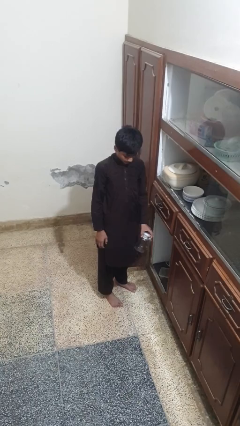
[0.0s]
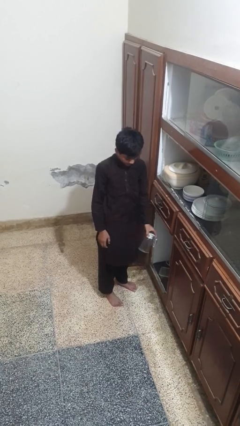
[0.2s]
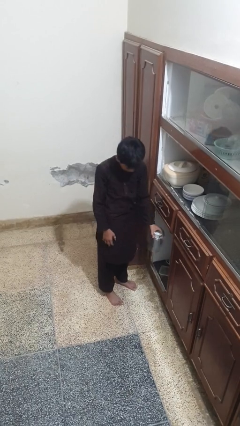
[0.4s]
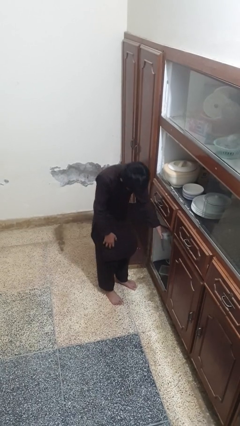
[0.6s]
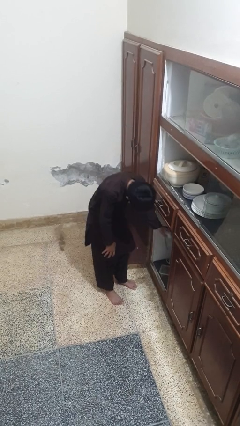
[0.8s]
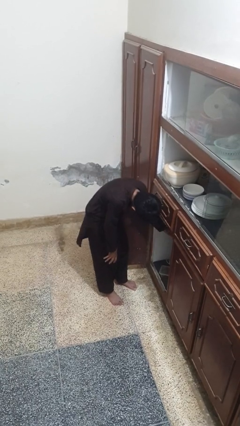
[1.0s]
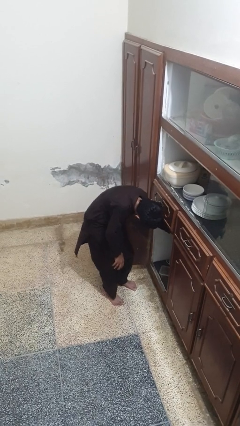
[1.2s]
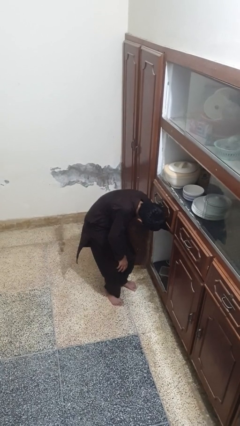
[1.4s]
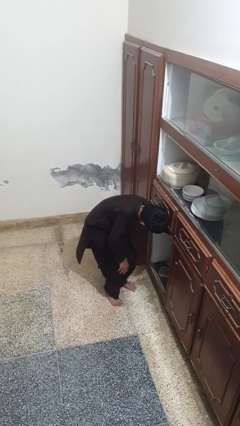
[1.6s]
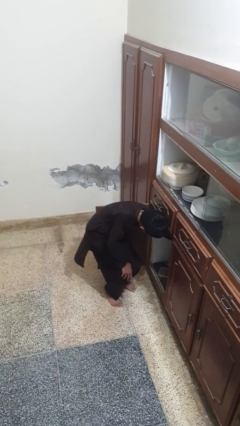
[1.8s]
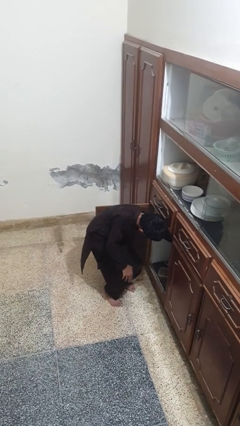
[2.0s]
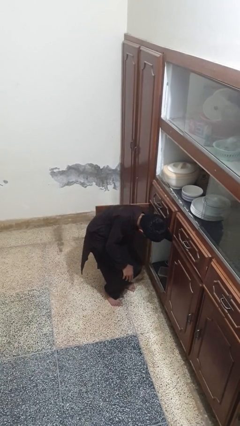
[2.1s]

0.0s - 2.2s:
person puts object in cabinet

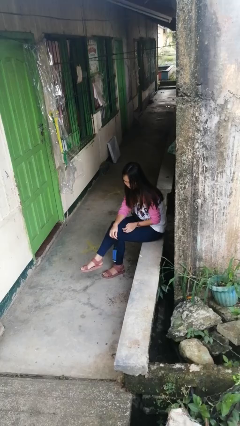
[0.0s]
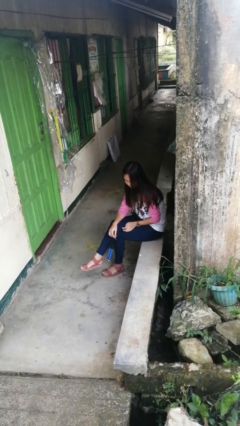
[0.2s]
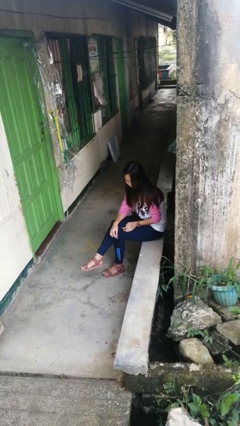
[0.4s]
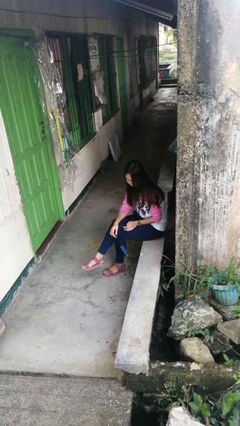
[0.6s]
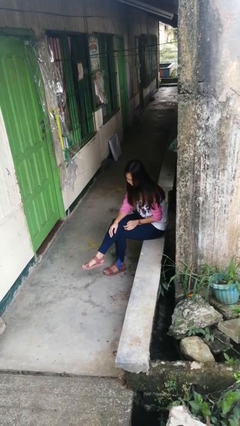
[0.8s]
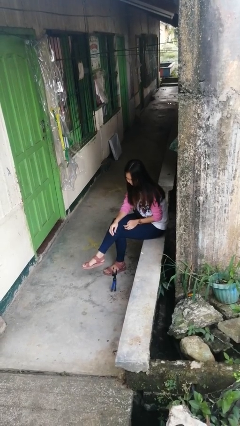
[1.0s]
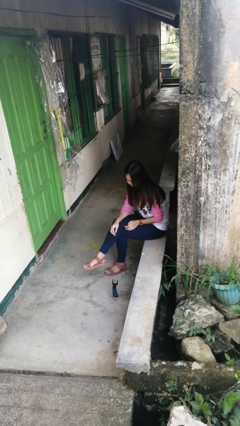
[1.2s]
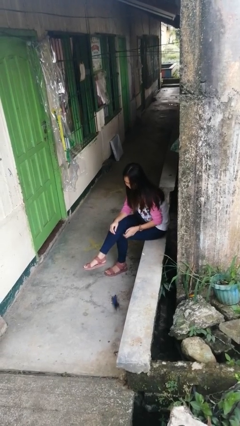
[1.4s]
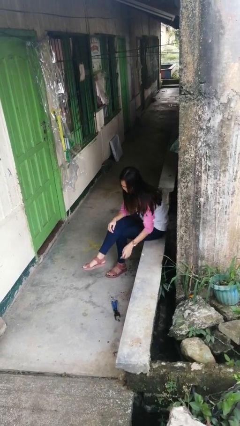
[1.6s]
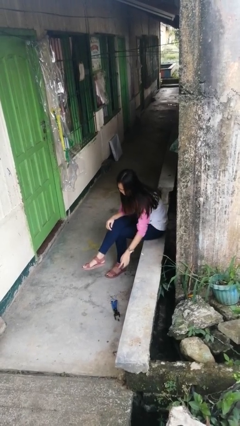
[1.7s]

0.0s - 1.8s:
person drops object

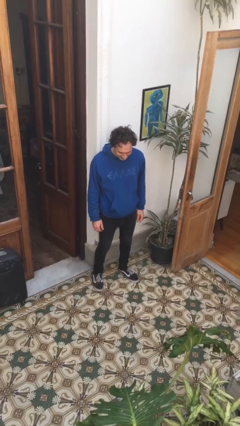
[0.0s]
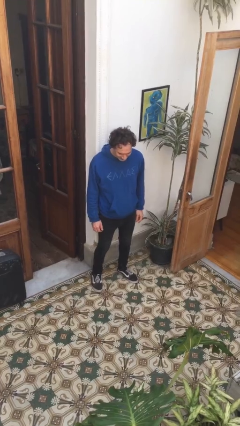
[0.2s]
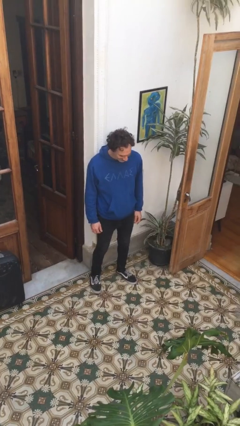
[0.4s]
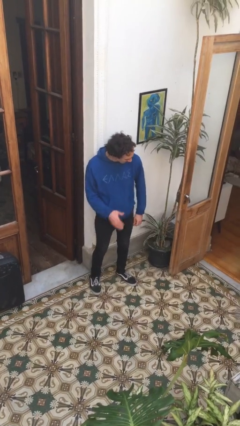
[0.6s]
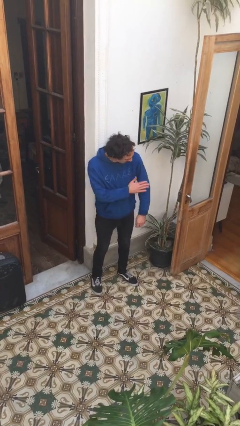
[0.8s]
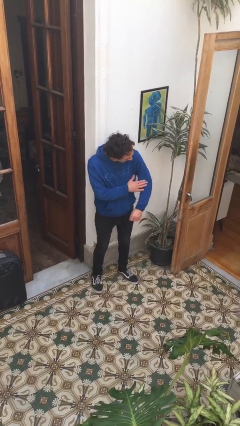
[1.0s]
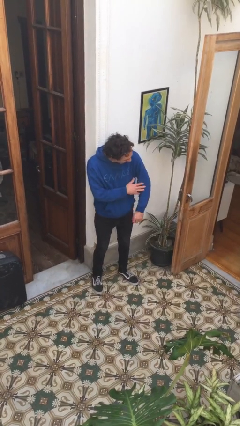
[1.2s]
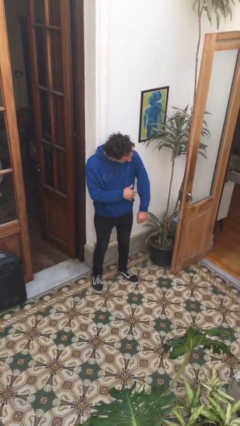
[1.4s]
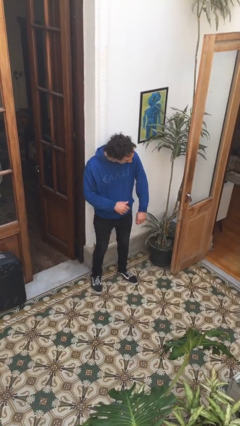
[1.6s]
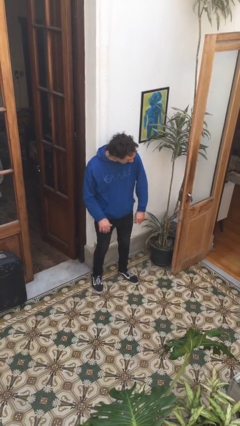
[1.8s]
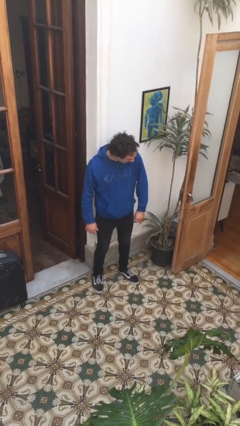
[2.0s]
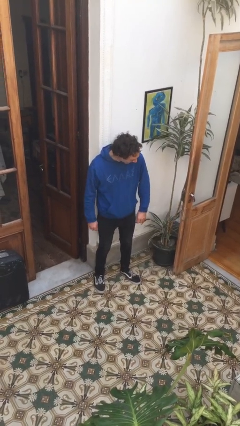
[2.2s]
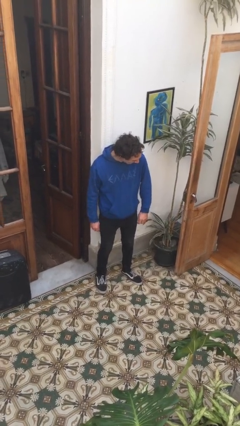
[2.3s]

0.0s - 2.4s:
person swats bug

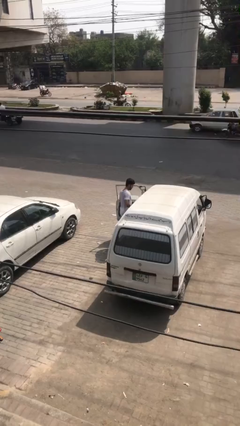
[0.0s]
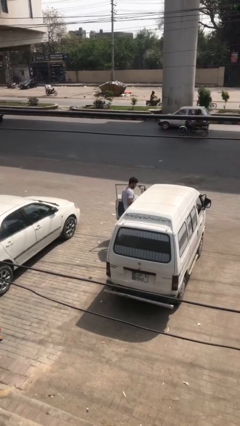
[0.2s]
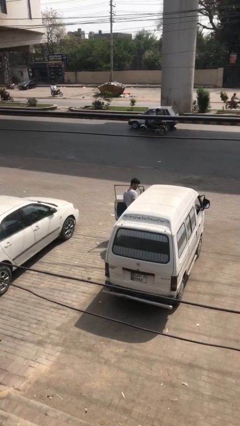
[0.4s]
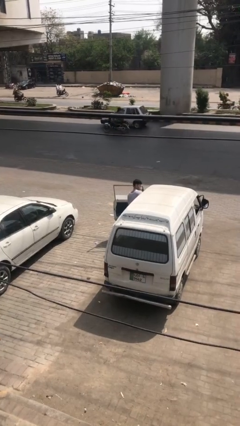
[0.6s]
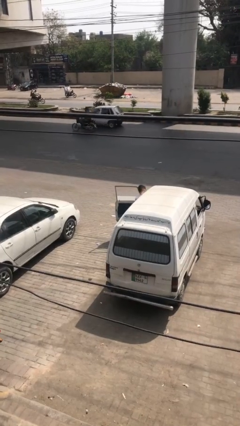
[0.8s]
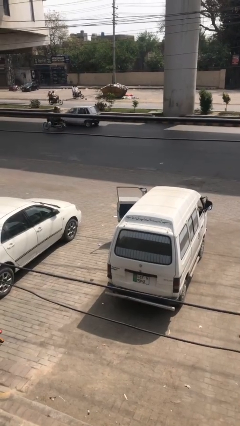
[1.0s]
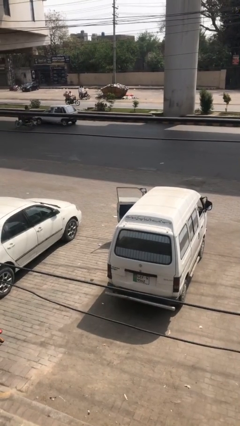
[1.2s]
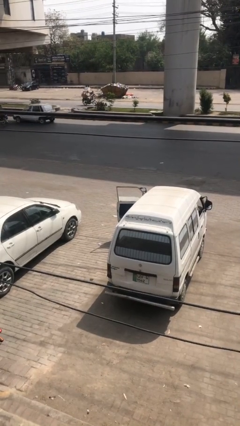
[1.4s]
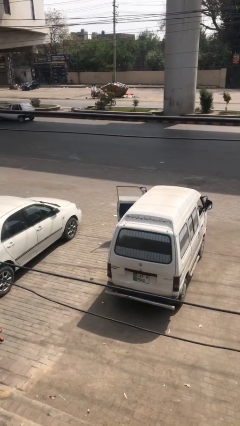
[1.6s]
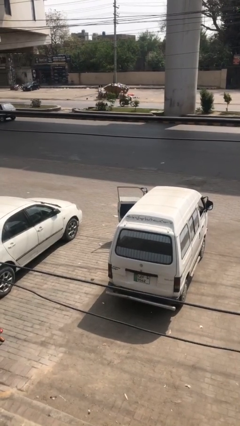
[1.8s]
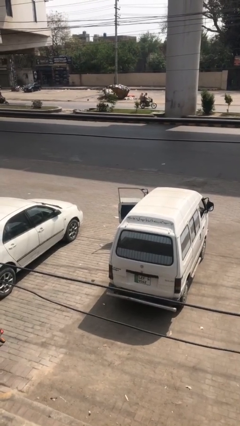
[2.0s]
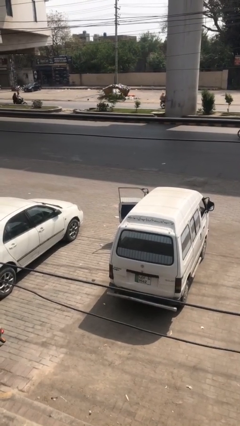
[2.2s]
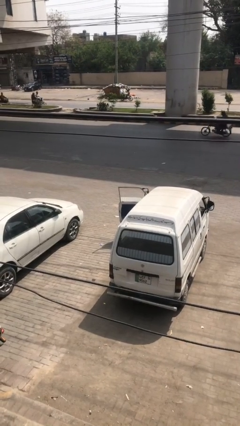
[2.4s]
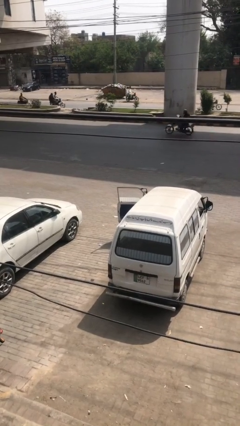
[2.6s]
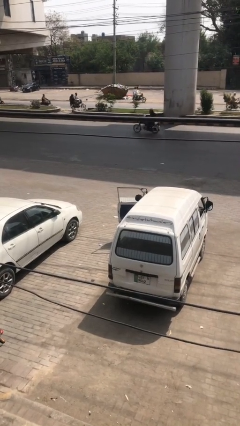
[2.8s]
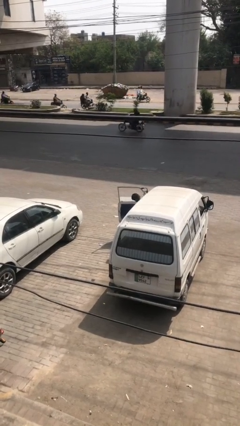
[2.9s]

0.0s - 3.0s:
person enters car

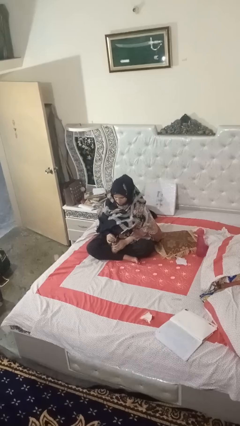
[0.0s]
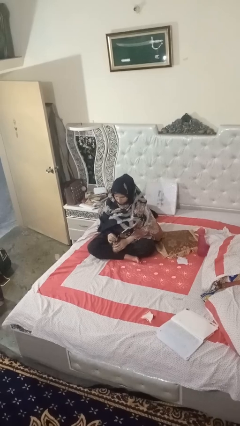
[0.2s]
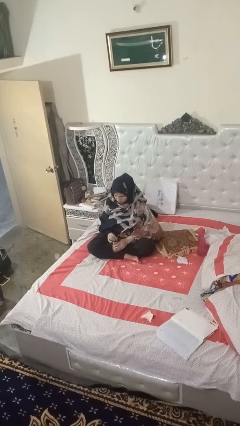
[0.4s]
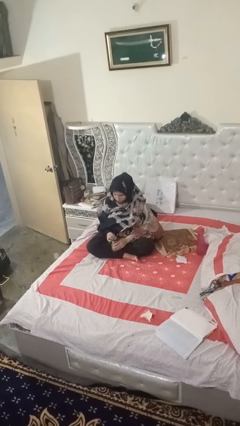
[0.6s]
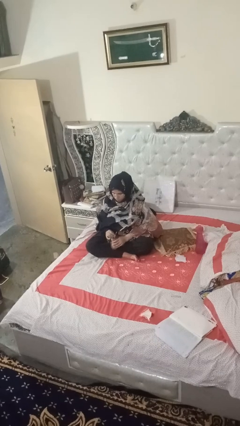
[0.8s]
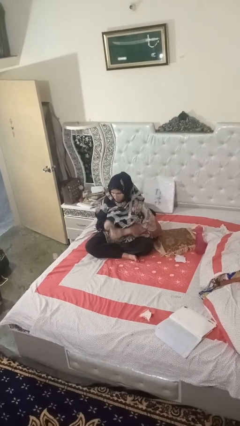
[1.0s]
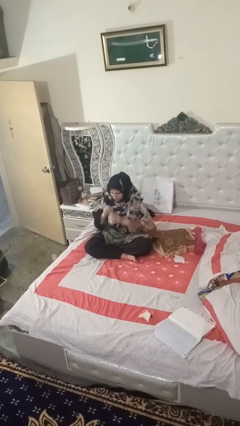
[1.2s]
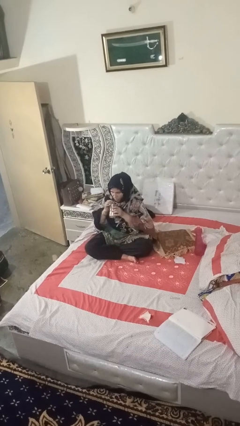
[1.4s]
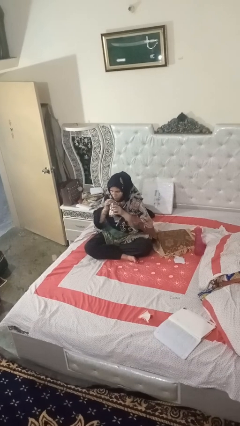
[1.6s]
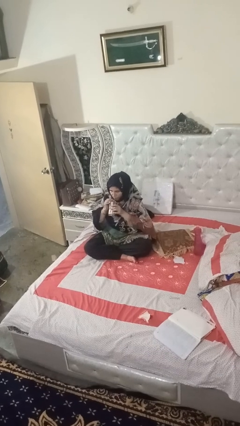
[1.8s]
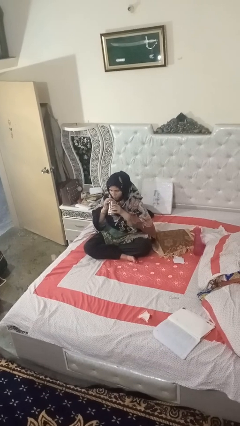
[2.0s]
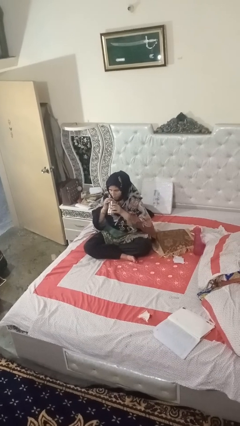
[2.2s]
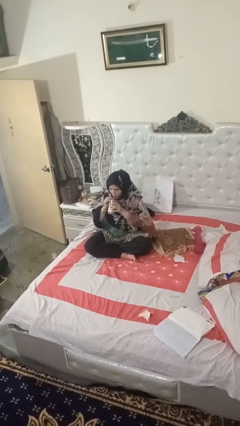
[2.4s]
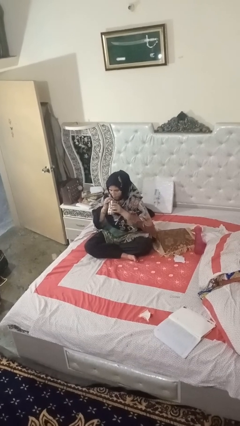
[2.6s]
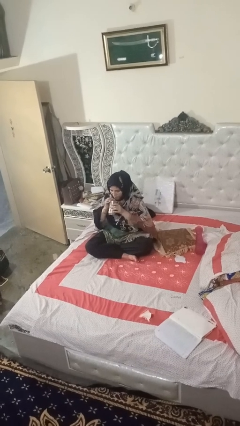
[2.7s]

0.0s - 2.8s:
person drinks from straw

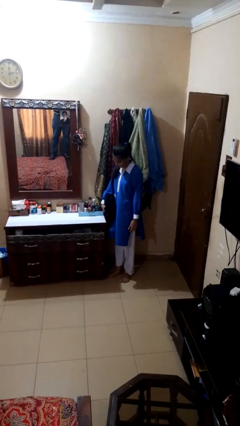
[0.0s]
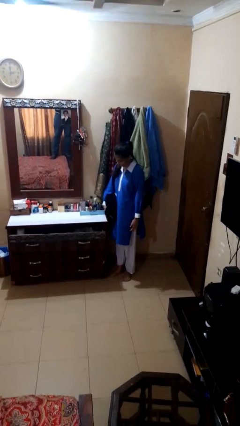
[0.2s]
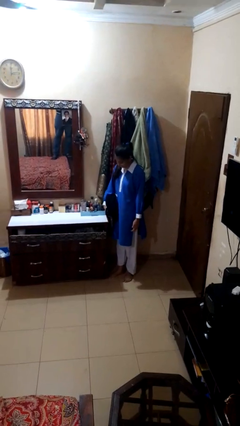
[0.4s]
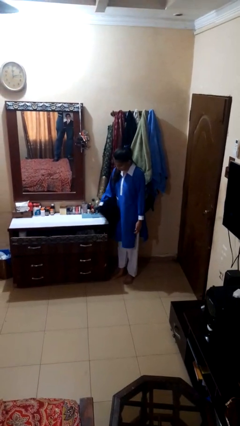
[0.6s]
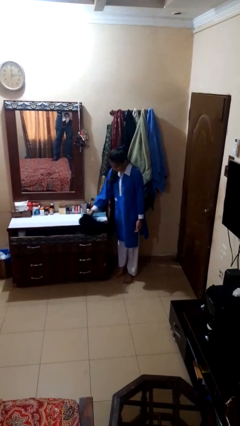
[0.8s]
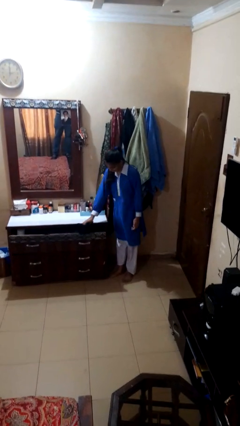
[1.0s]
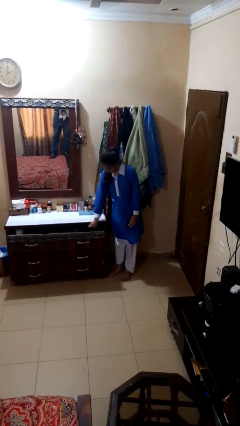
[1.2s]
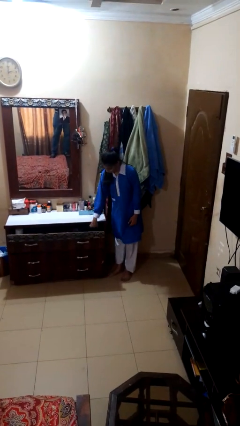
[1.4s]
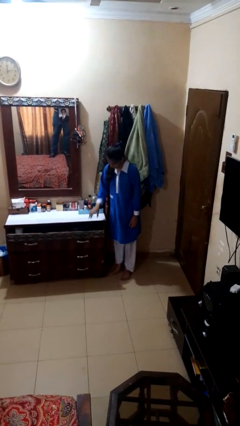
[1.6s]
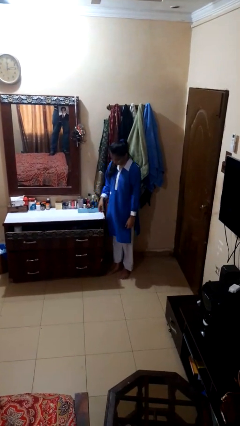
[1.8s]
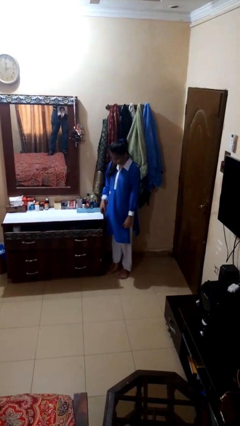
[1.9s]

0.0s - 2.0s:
person puts clothes into dresser

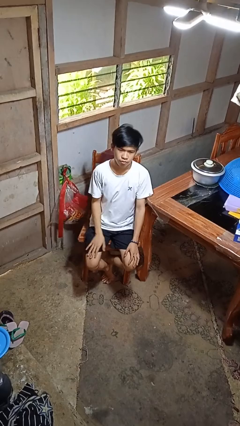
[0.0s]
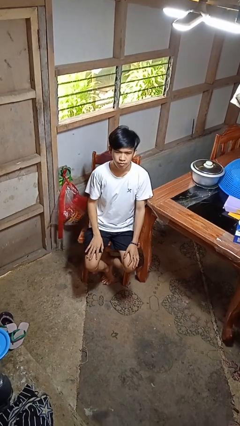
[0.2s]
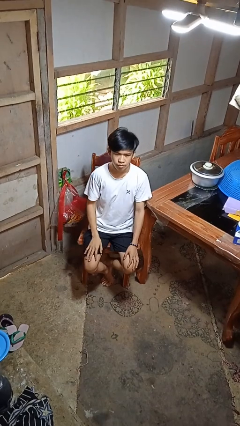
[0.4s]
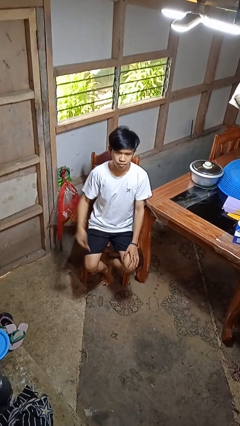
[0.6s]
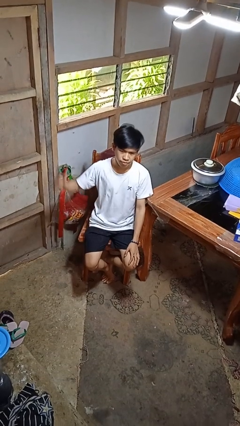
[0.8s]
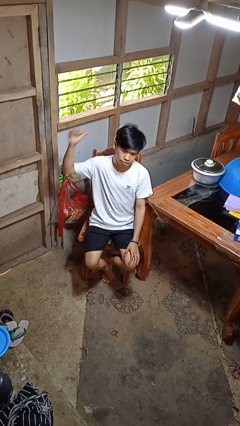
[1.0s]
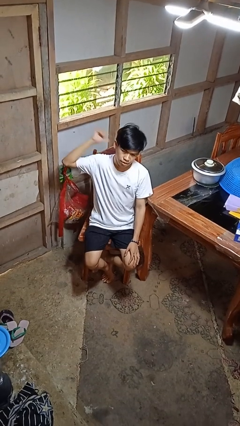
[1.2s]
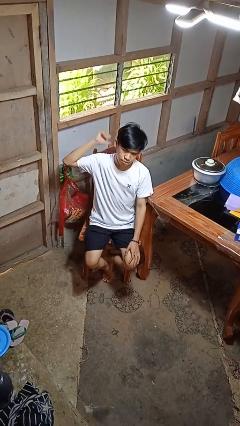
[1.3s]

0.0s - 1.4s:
person gestures behind me

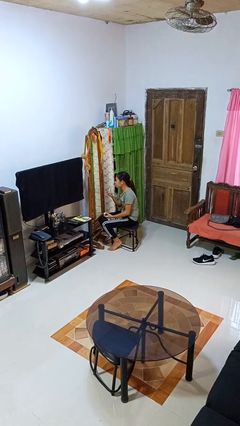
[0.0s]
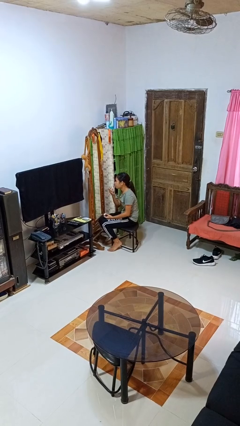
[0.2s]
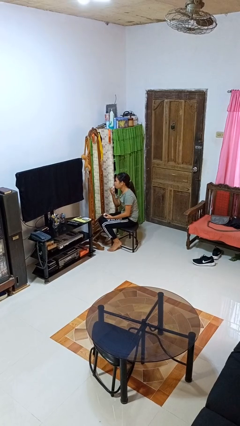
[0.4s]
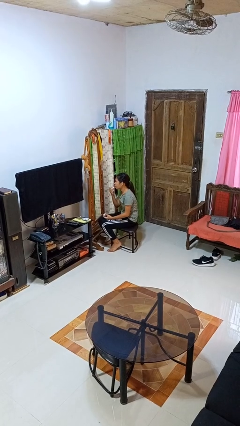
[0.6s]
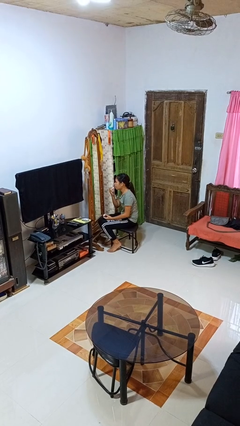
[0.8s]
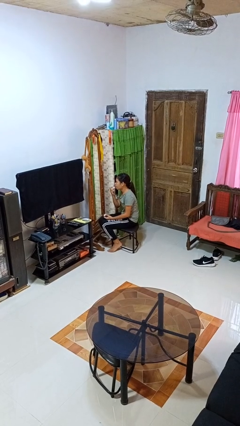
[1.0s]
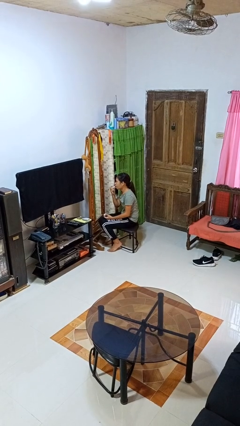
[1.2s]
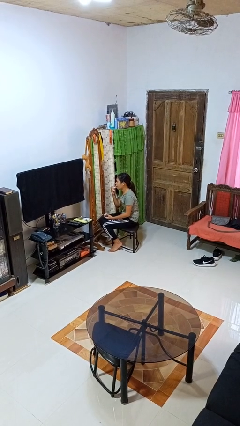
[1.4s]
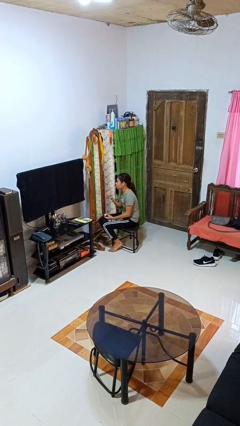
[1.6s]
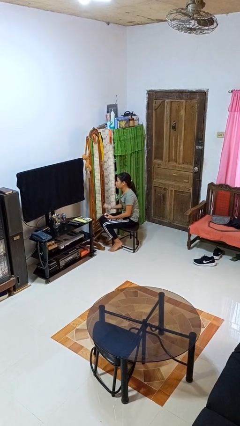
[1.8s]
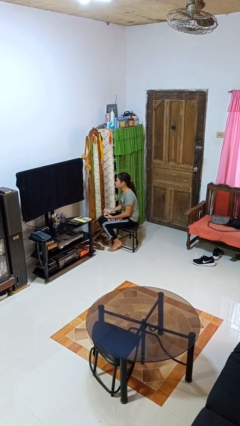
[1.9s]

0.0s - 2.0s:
person applies lip makeup
